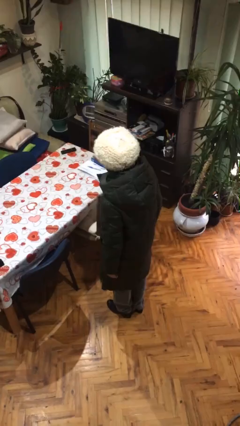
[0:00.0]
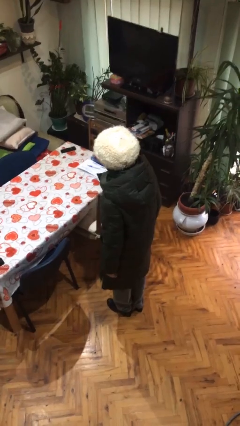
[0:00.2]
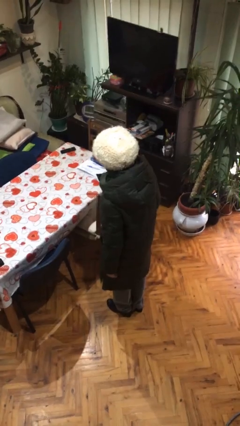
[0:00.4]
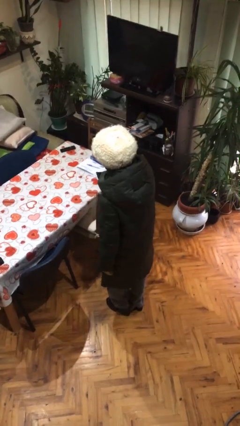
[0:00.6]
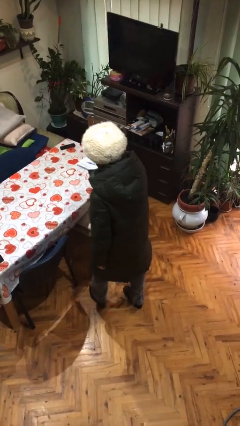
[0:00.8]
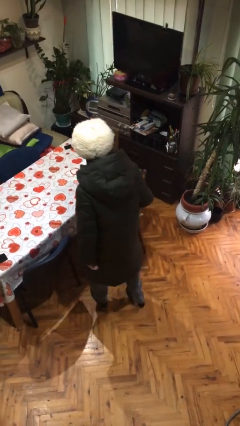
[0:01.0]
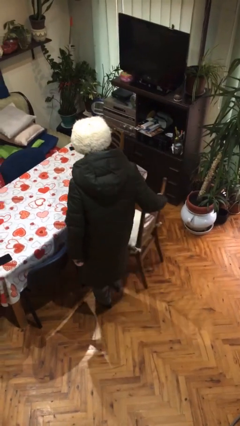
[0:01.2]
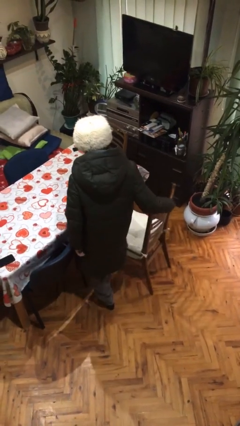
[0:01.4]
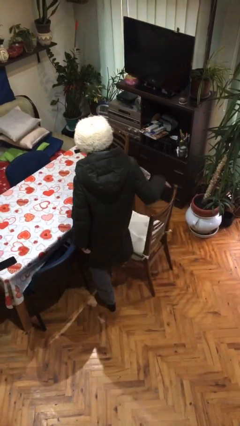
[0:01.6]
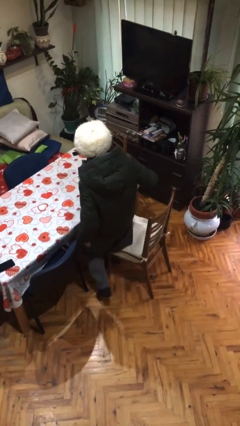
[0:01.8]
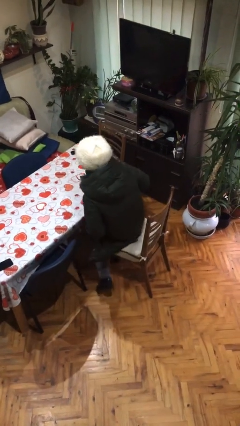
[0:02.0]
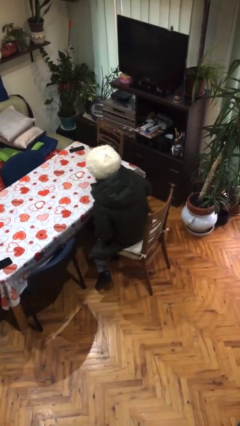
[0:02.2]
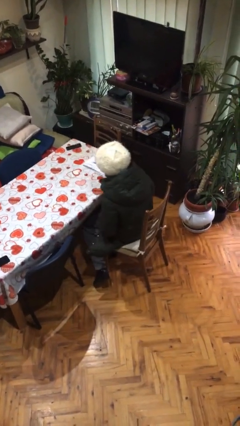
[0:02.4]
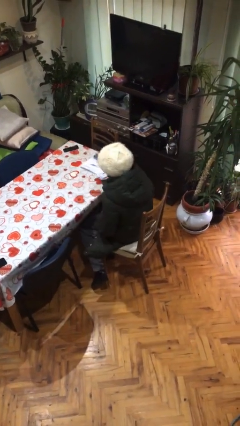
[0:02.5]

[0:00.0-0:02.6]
person sits down

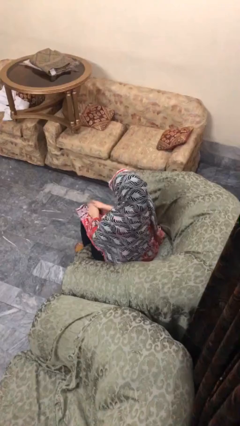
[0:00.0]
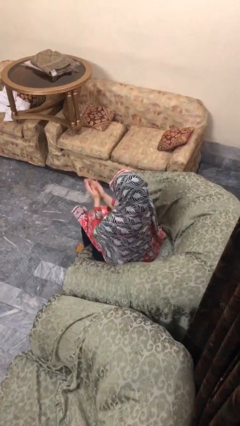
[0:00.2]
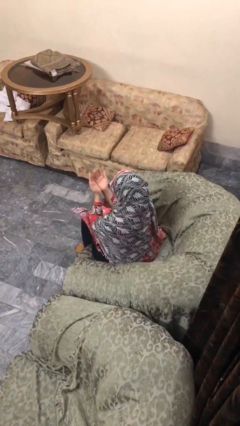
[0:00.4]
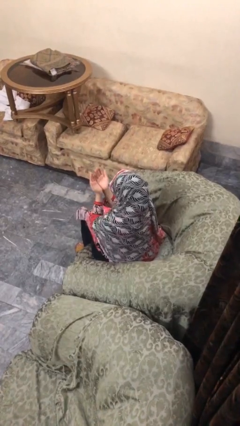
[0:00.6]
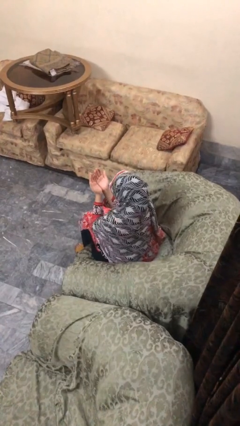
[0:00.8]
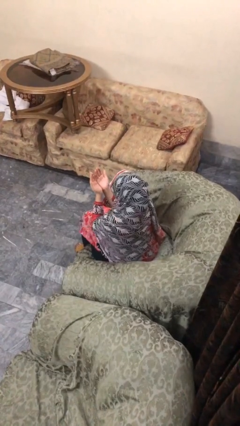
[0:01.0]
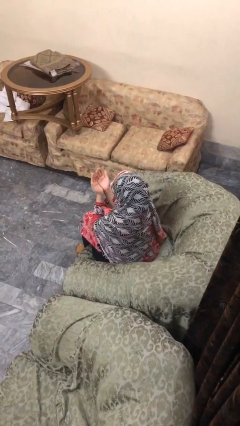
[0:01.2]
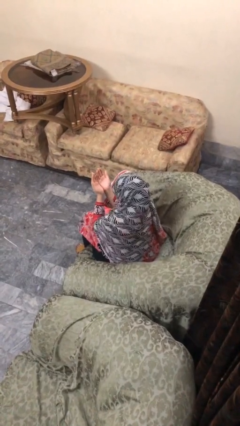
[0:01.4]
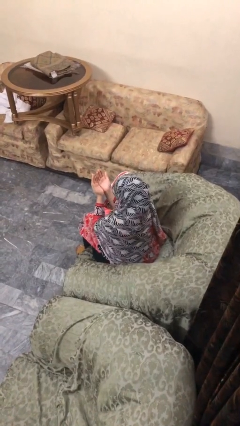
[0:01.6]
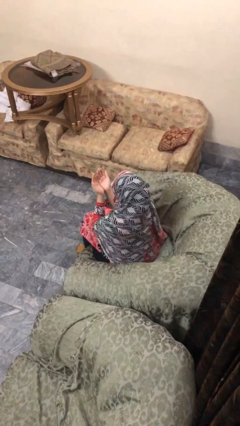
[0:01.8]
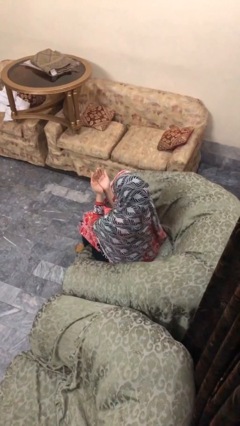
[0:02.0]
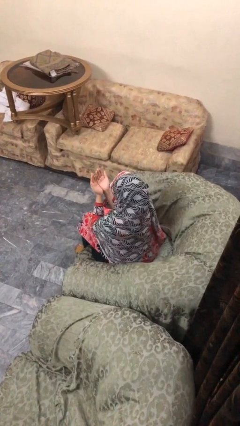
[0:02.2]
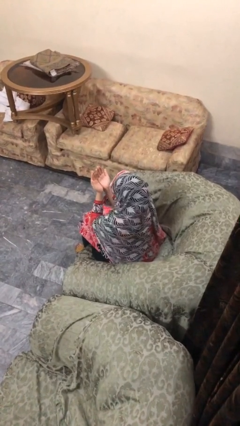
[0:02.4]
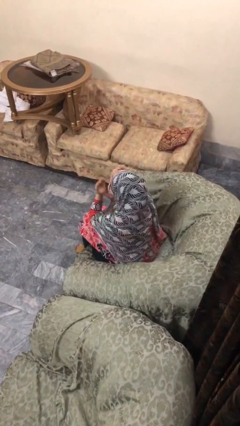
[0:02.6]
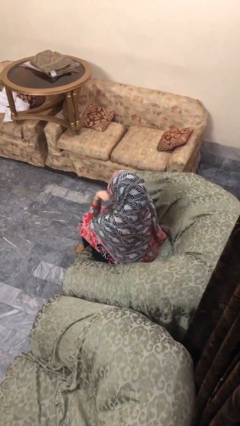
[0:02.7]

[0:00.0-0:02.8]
person prays

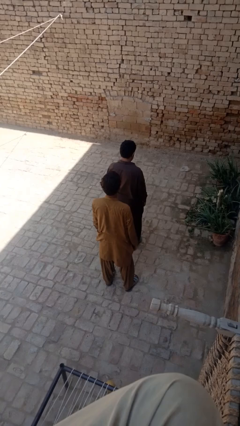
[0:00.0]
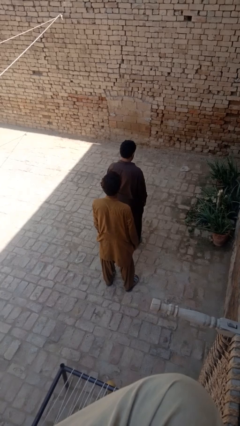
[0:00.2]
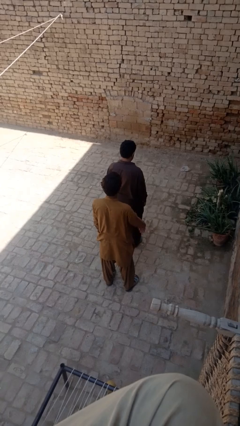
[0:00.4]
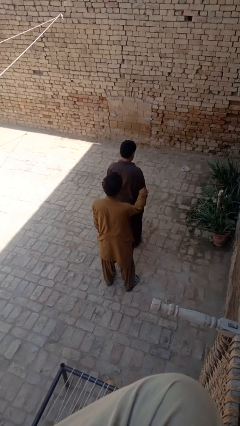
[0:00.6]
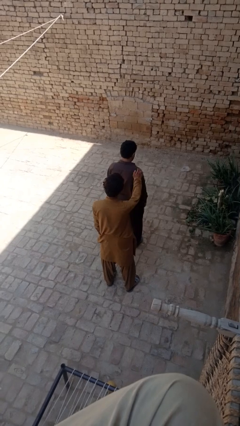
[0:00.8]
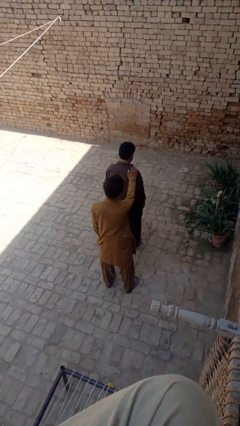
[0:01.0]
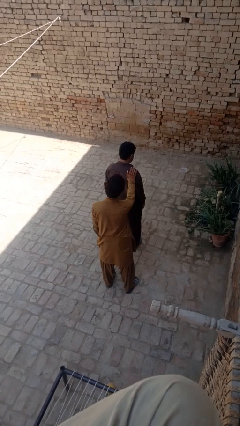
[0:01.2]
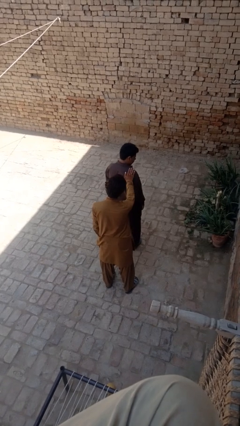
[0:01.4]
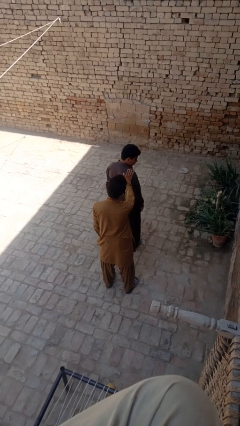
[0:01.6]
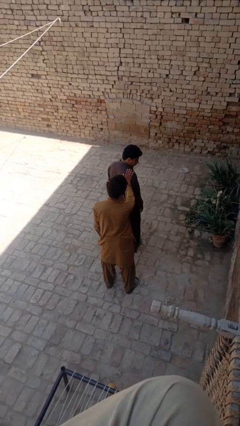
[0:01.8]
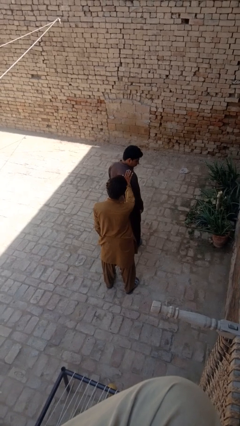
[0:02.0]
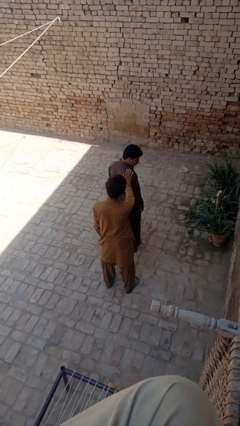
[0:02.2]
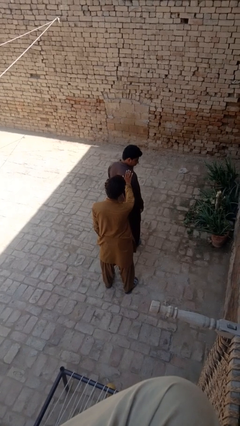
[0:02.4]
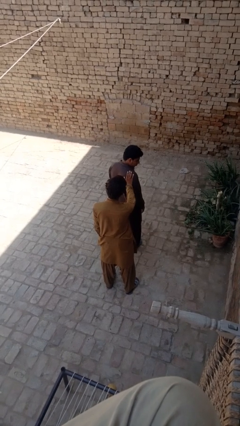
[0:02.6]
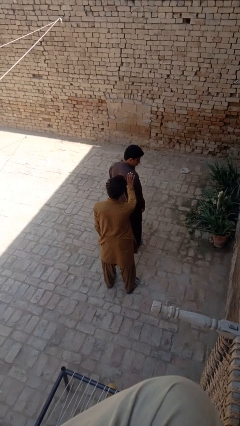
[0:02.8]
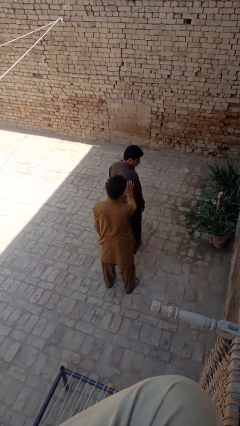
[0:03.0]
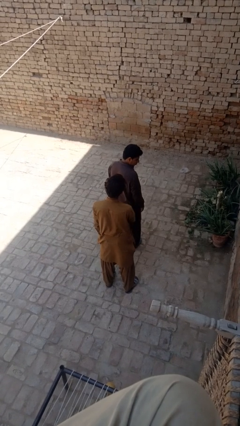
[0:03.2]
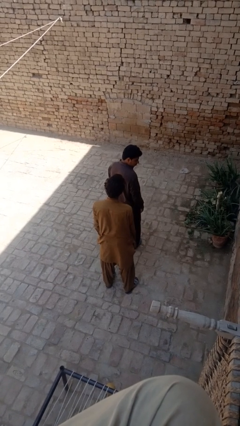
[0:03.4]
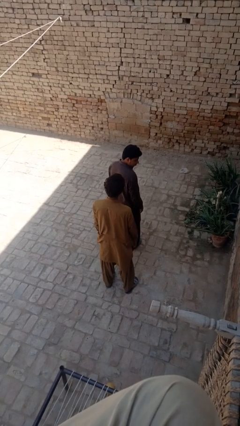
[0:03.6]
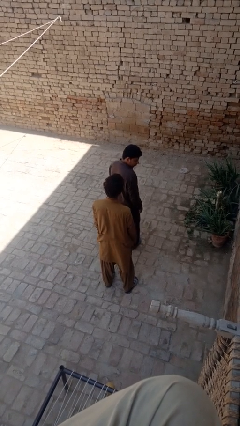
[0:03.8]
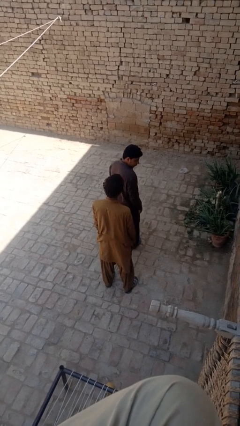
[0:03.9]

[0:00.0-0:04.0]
person looks over shoulder

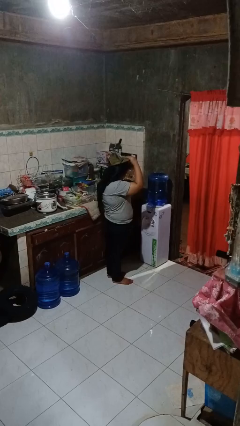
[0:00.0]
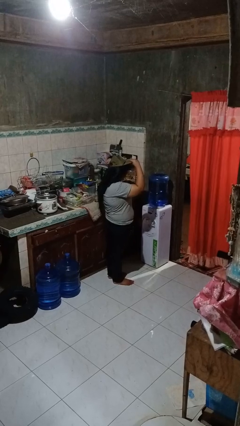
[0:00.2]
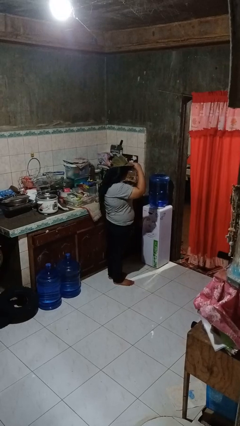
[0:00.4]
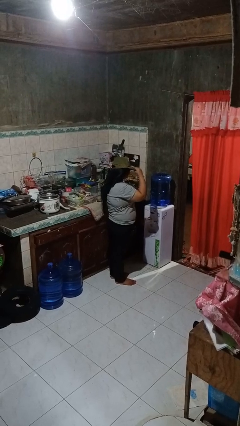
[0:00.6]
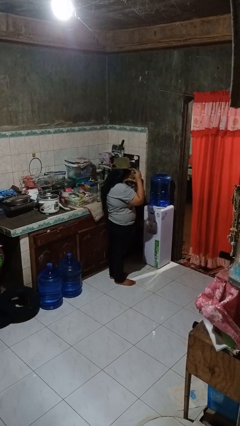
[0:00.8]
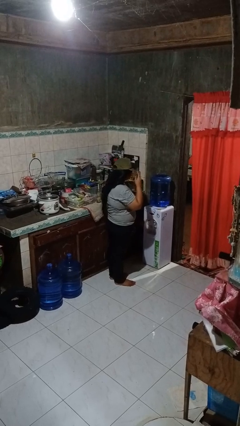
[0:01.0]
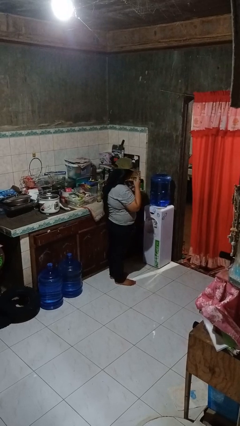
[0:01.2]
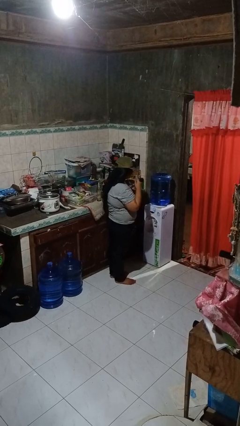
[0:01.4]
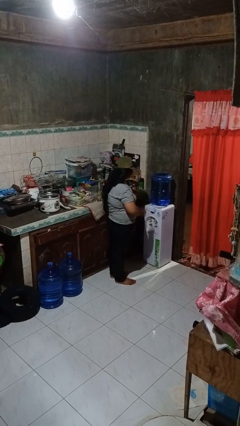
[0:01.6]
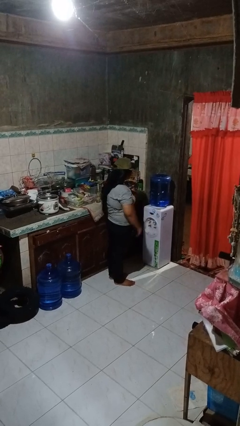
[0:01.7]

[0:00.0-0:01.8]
person puts on hat

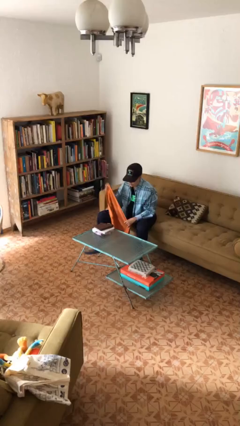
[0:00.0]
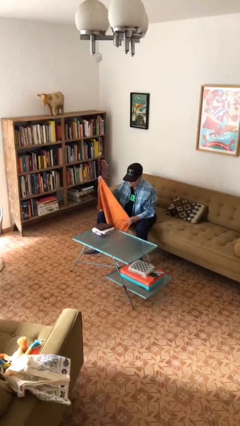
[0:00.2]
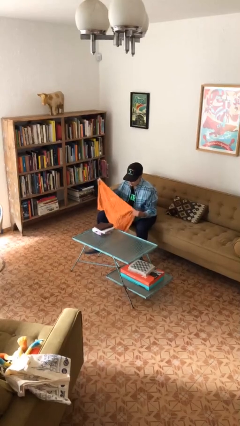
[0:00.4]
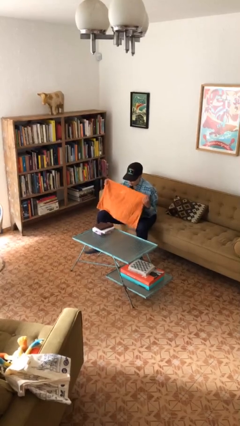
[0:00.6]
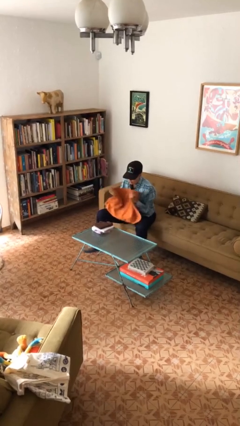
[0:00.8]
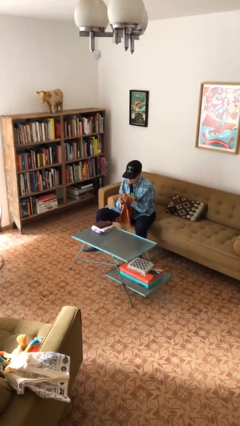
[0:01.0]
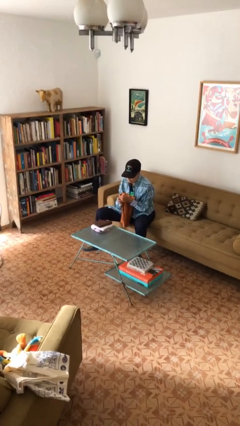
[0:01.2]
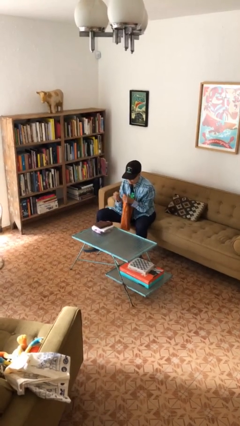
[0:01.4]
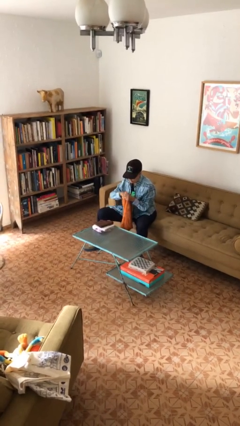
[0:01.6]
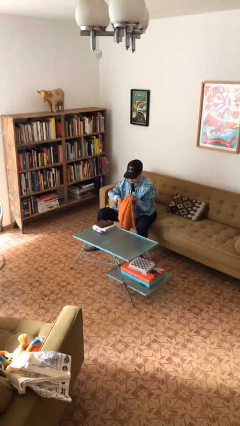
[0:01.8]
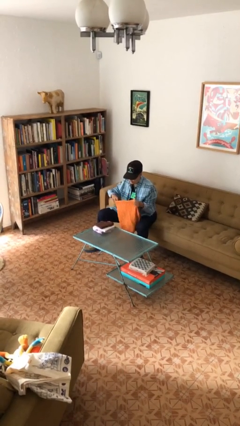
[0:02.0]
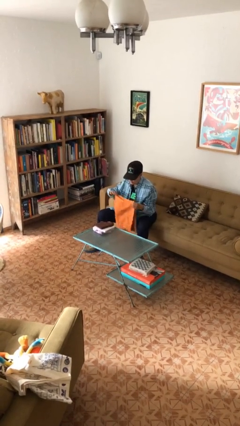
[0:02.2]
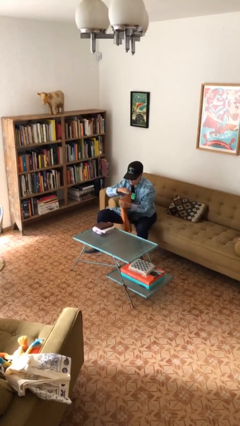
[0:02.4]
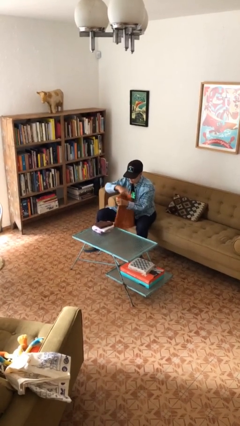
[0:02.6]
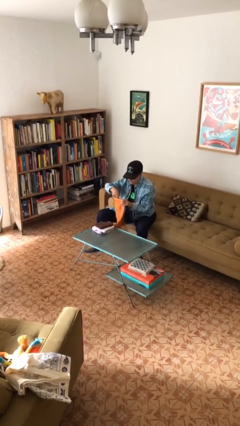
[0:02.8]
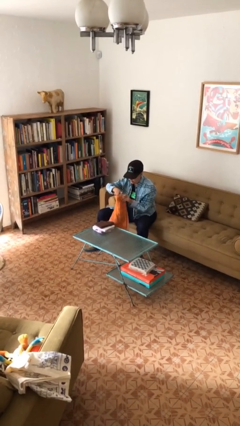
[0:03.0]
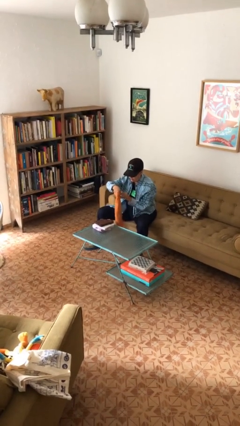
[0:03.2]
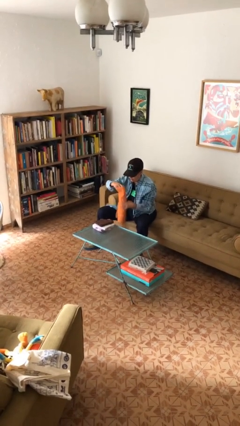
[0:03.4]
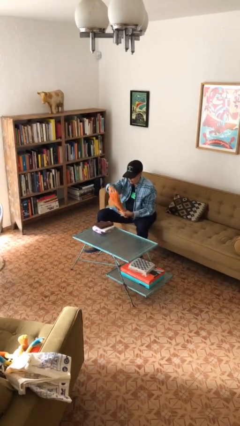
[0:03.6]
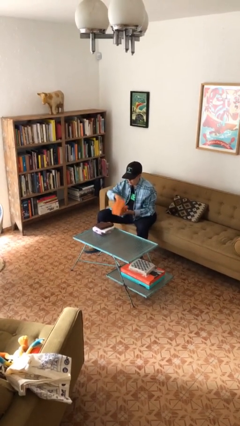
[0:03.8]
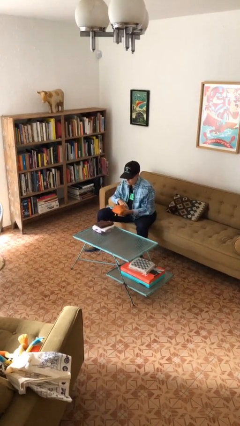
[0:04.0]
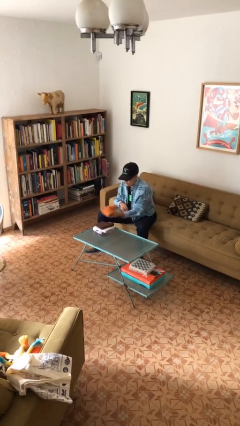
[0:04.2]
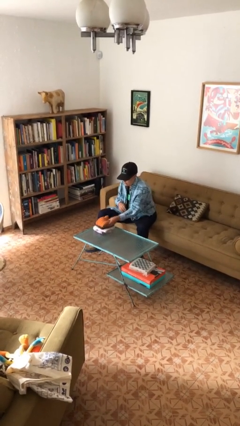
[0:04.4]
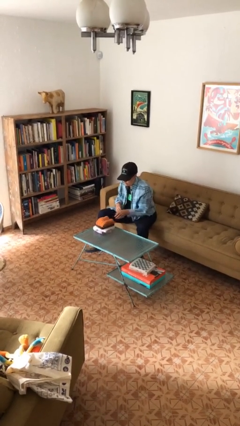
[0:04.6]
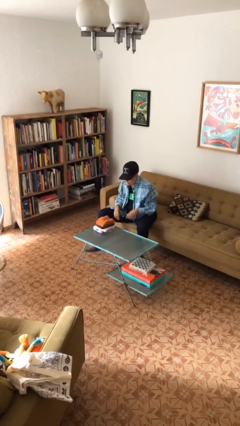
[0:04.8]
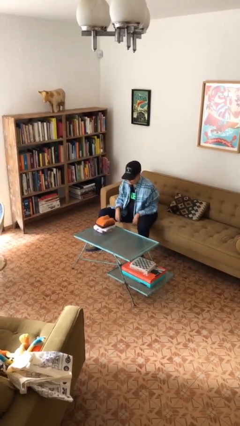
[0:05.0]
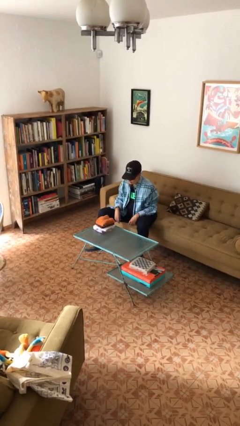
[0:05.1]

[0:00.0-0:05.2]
person folds towel

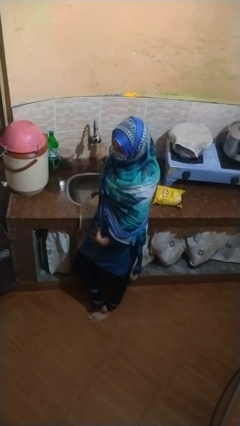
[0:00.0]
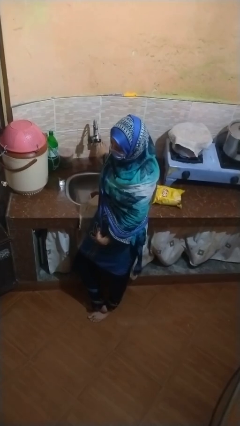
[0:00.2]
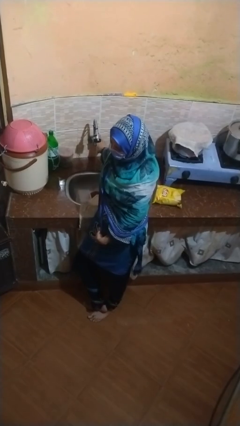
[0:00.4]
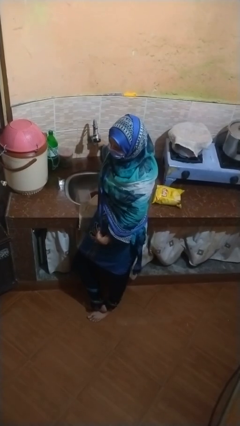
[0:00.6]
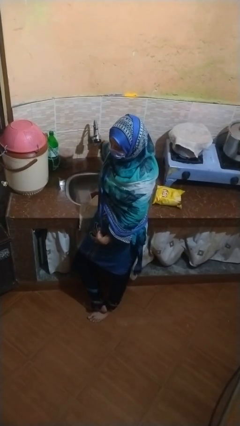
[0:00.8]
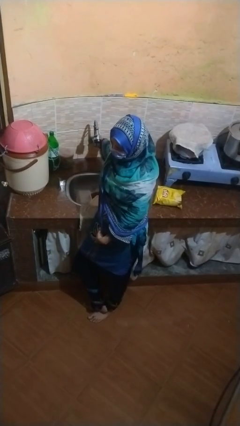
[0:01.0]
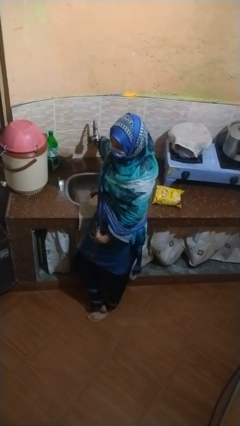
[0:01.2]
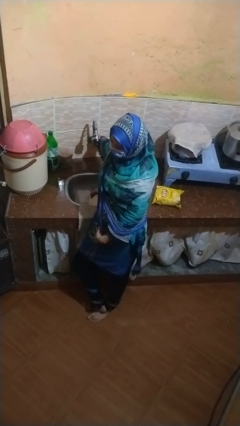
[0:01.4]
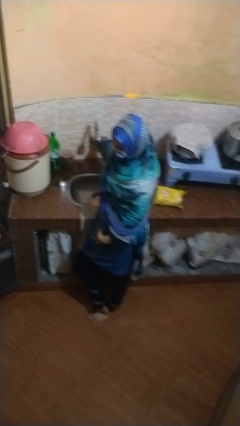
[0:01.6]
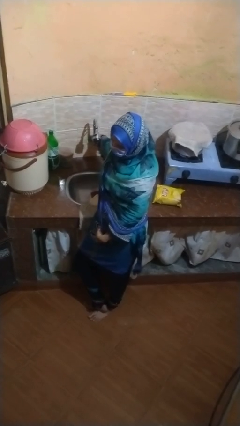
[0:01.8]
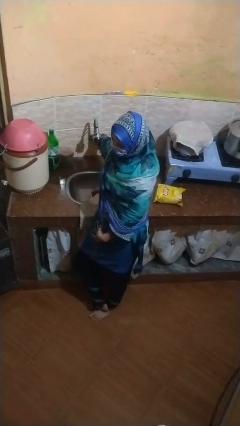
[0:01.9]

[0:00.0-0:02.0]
person turns off faucet
